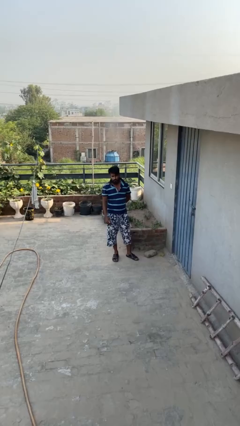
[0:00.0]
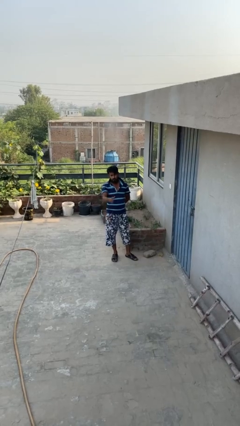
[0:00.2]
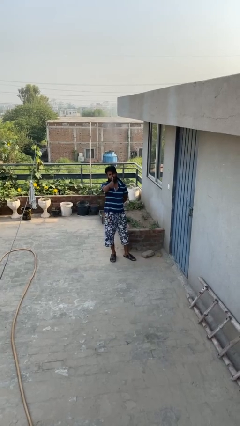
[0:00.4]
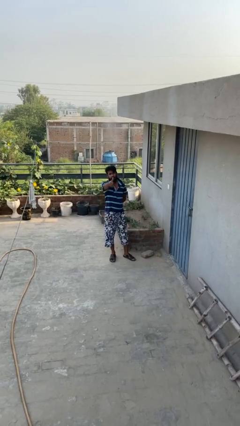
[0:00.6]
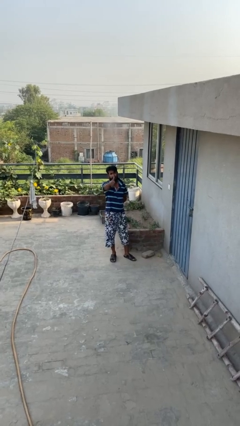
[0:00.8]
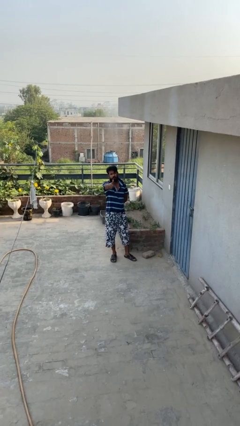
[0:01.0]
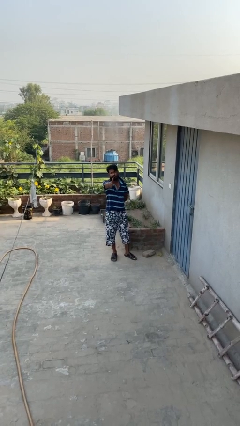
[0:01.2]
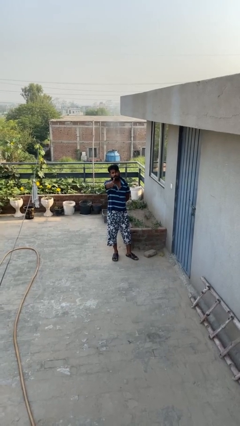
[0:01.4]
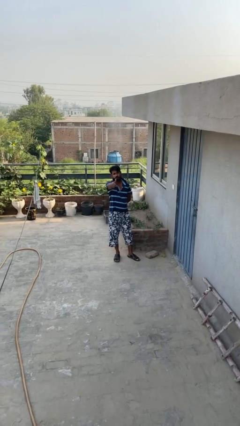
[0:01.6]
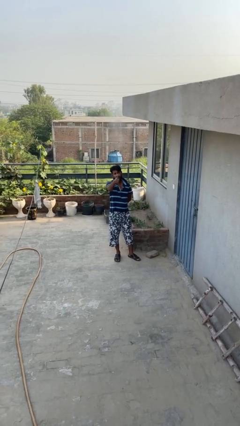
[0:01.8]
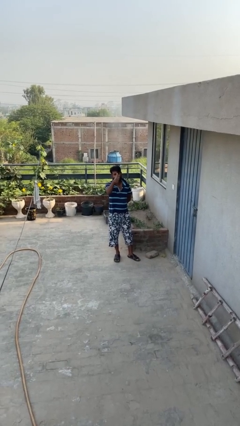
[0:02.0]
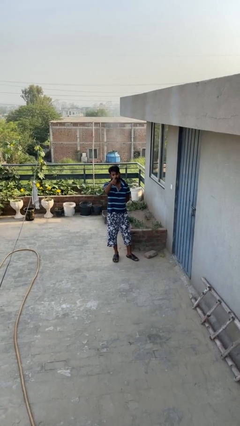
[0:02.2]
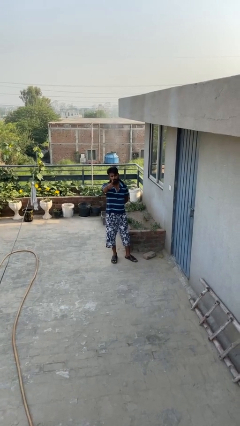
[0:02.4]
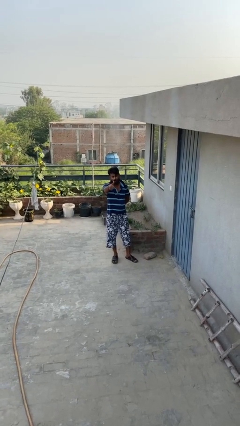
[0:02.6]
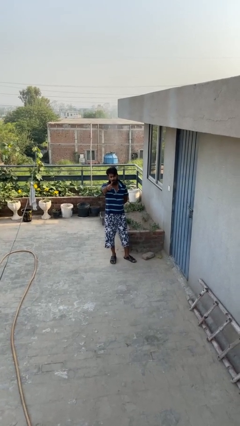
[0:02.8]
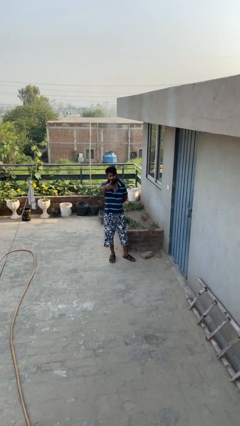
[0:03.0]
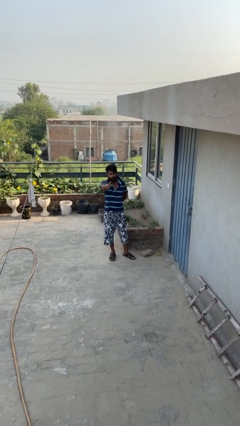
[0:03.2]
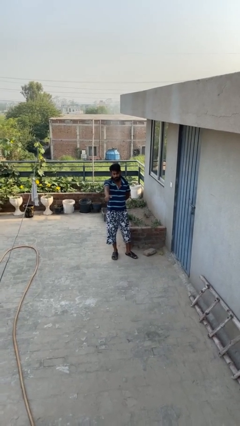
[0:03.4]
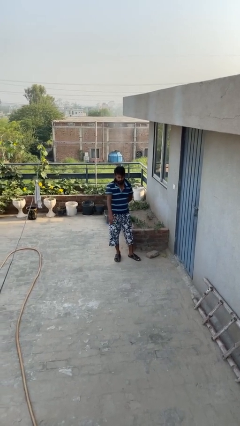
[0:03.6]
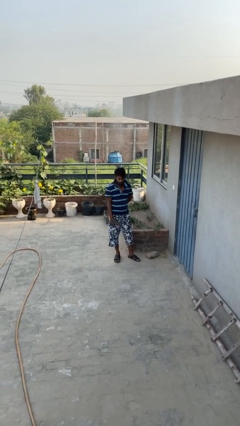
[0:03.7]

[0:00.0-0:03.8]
person gestures thumbs up

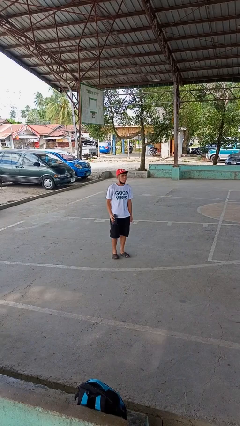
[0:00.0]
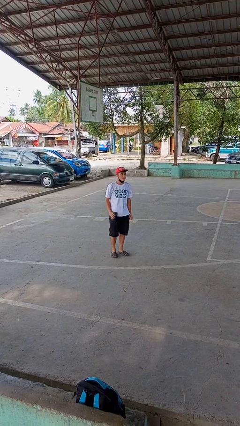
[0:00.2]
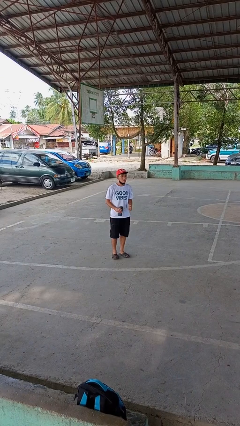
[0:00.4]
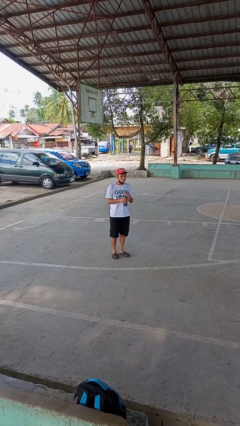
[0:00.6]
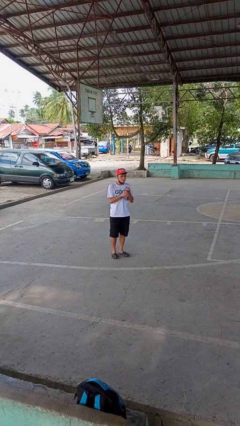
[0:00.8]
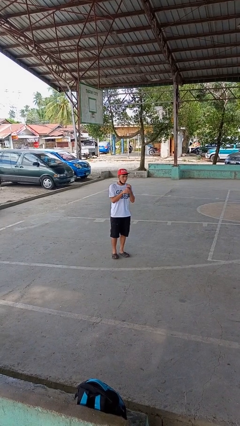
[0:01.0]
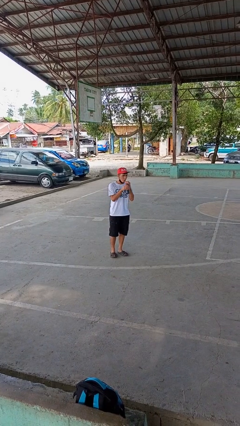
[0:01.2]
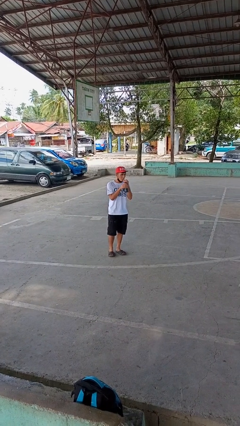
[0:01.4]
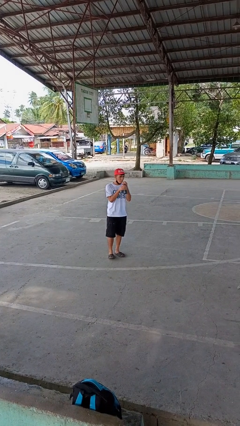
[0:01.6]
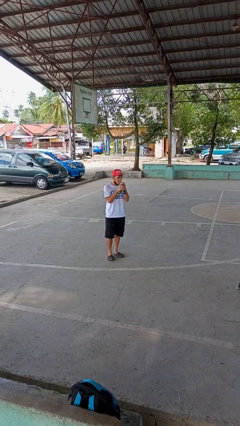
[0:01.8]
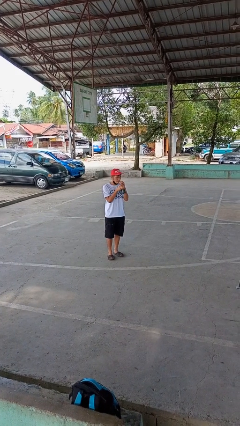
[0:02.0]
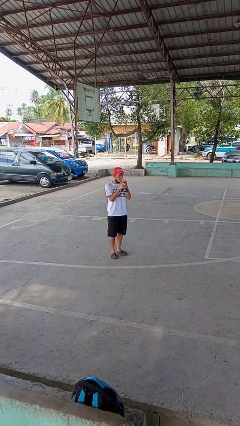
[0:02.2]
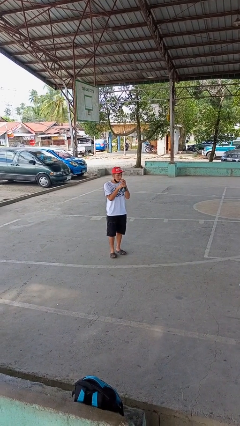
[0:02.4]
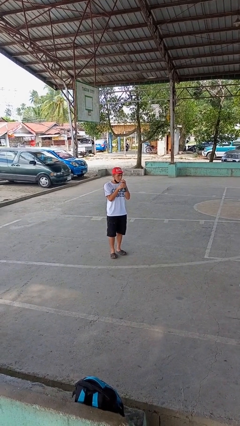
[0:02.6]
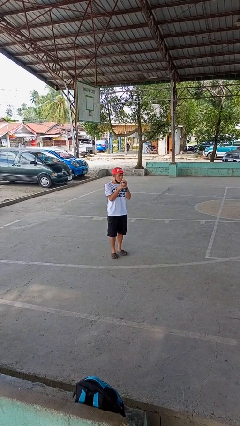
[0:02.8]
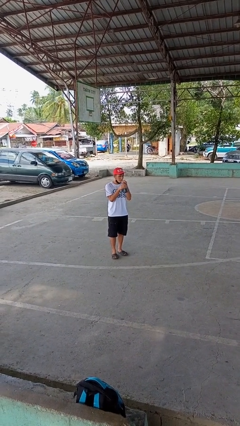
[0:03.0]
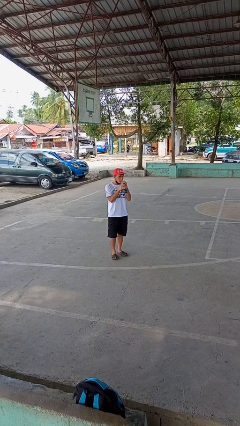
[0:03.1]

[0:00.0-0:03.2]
person drinks from straw

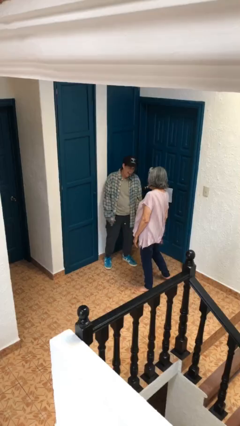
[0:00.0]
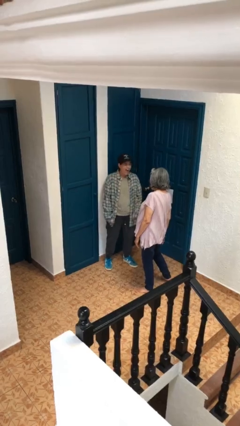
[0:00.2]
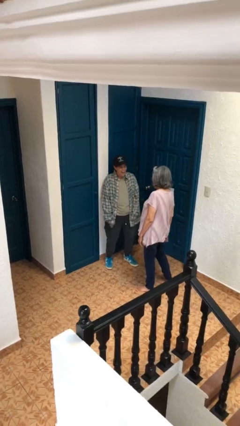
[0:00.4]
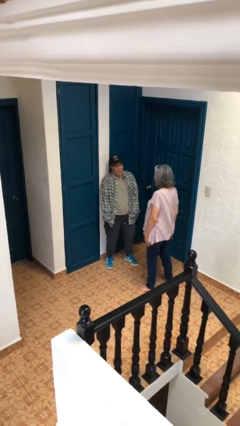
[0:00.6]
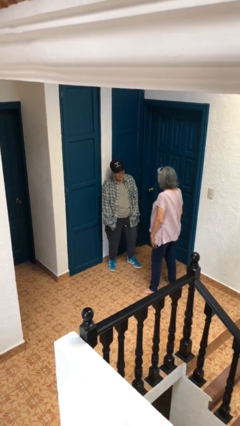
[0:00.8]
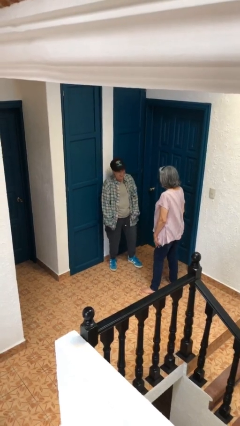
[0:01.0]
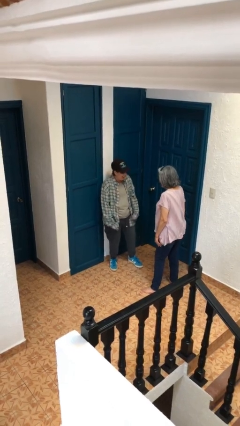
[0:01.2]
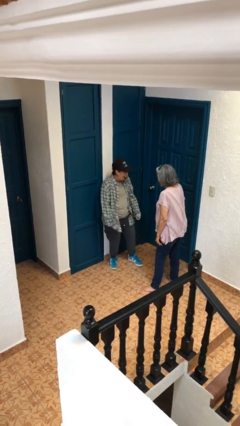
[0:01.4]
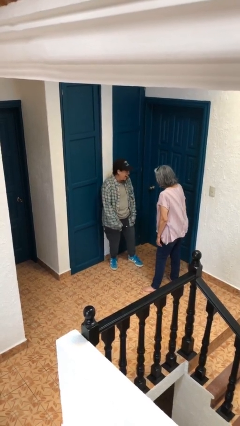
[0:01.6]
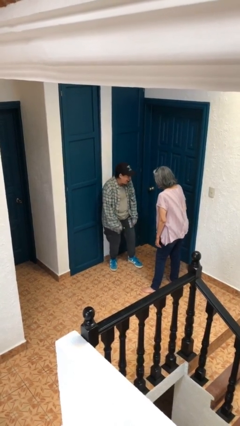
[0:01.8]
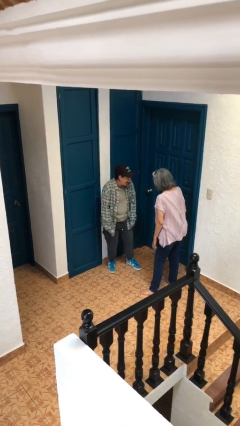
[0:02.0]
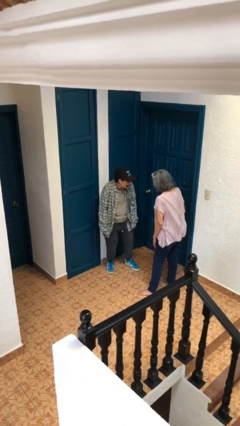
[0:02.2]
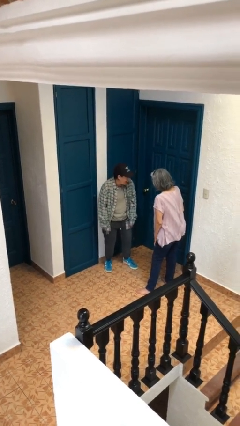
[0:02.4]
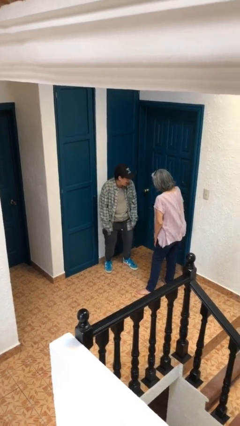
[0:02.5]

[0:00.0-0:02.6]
person laughs with person

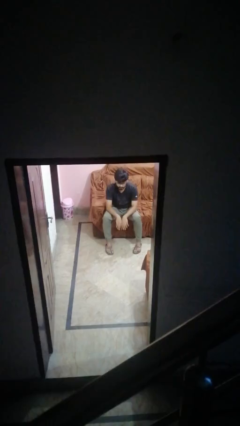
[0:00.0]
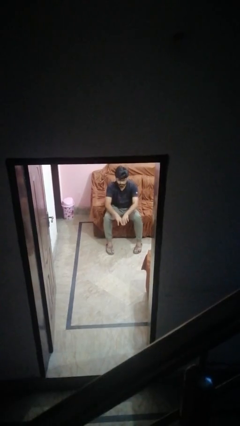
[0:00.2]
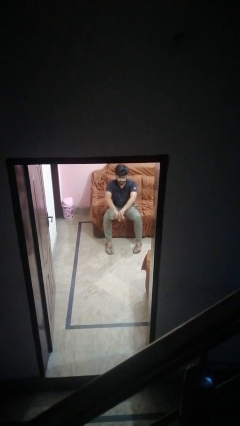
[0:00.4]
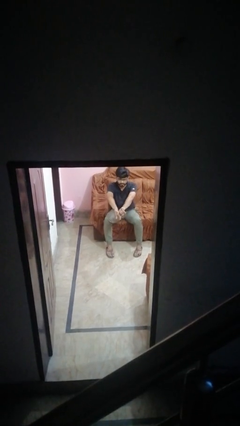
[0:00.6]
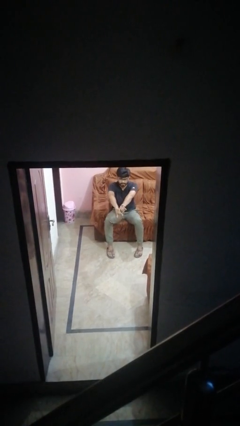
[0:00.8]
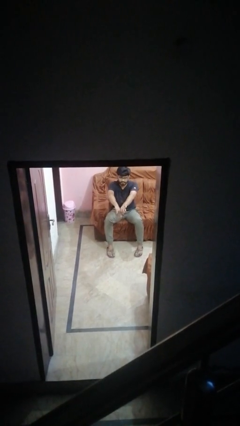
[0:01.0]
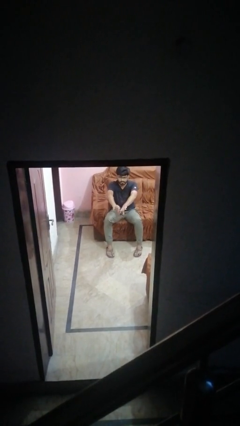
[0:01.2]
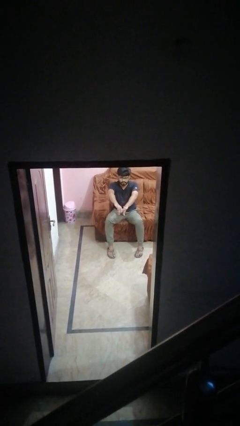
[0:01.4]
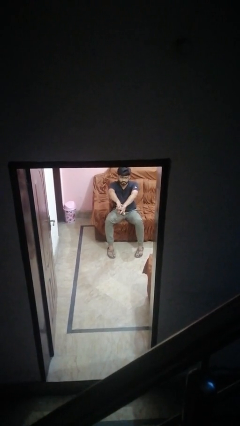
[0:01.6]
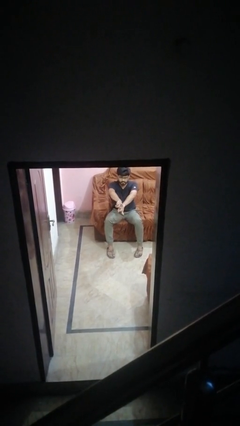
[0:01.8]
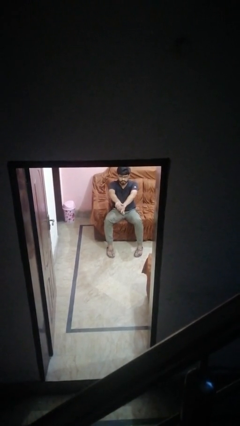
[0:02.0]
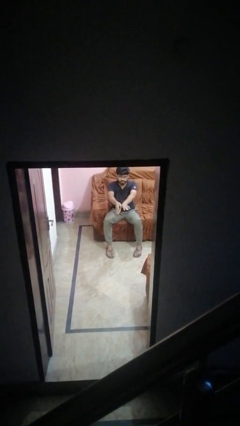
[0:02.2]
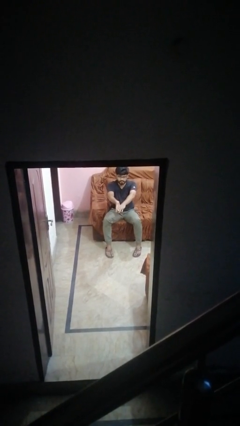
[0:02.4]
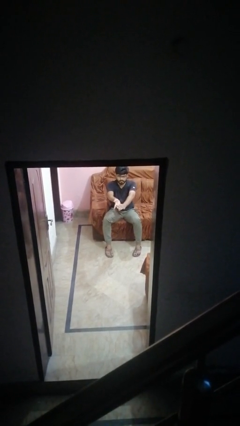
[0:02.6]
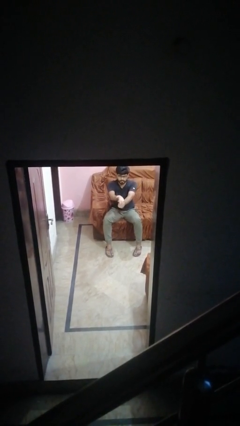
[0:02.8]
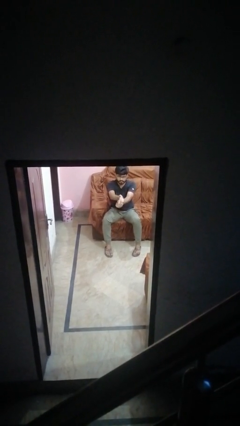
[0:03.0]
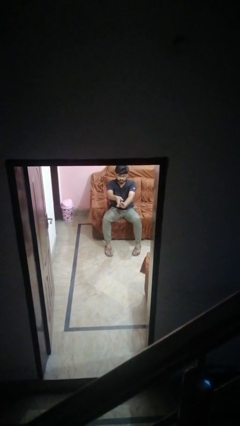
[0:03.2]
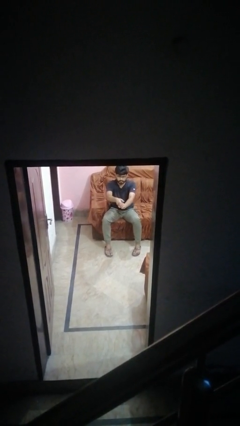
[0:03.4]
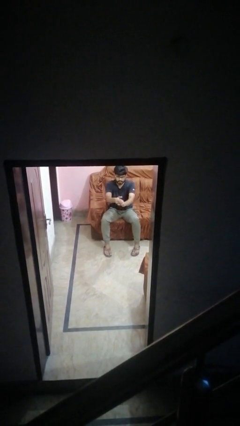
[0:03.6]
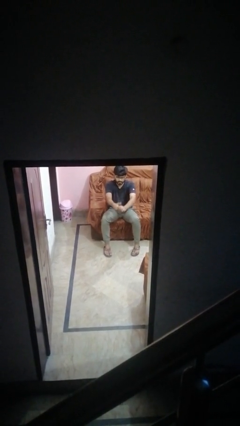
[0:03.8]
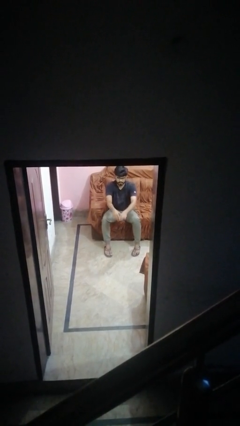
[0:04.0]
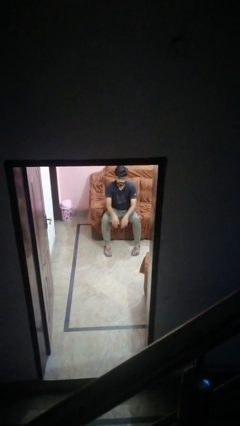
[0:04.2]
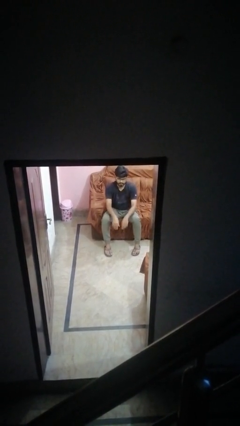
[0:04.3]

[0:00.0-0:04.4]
person cracks knuckles
